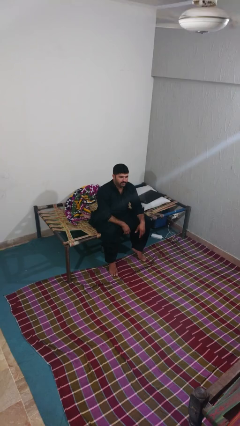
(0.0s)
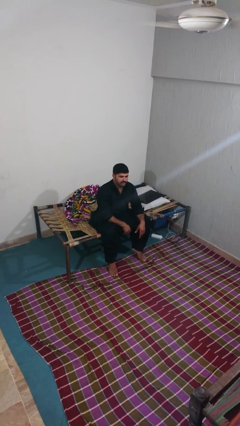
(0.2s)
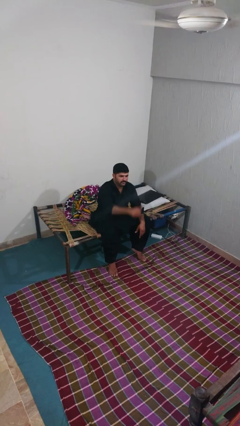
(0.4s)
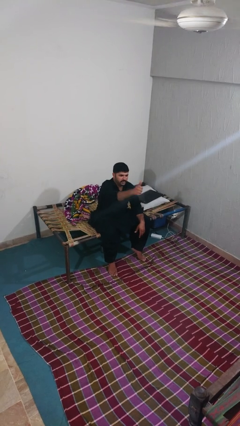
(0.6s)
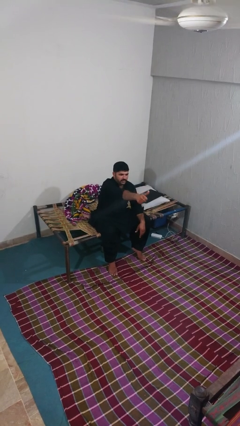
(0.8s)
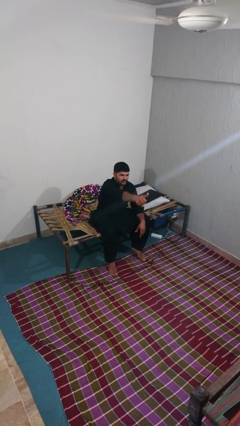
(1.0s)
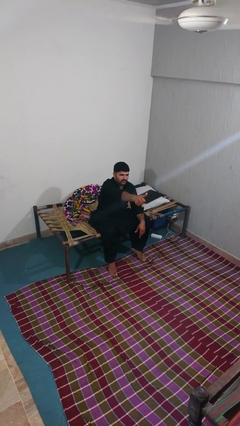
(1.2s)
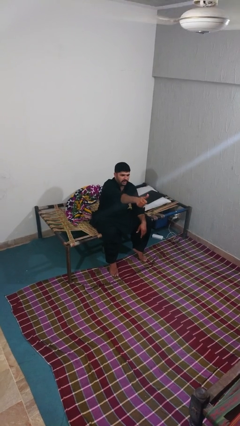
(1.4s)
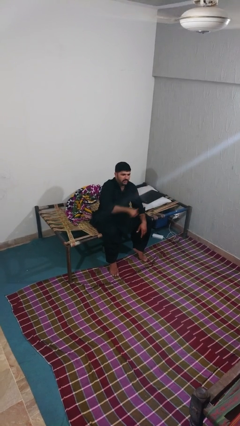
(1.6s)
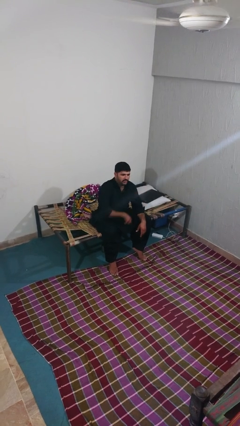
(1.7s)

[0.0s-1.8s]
person gestures thumbs up

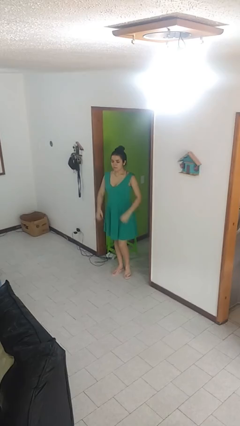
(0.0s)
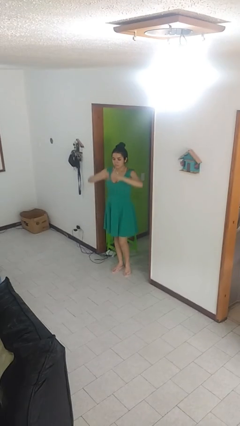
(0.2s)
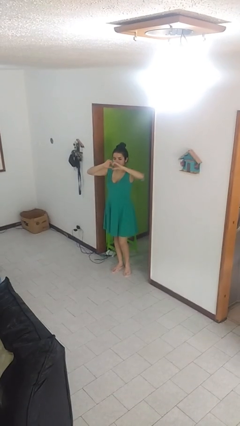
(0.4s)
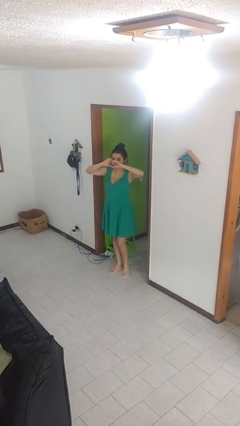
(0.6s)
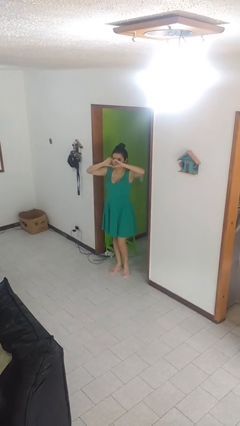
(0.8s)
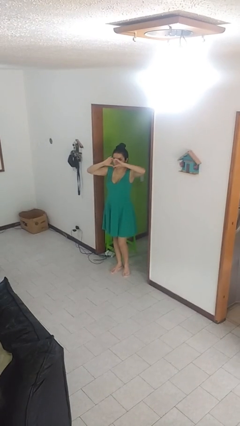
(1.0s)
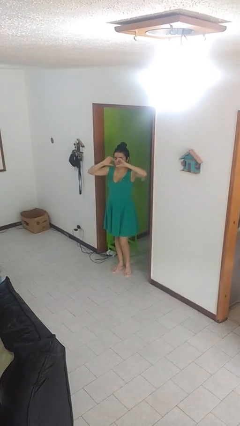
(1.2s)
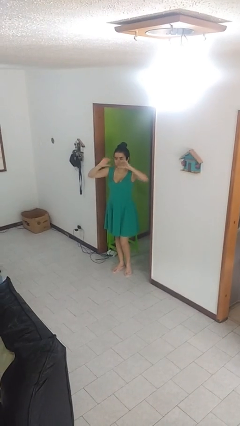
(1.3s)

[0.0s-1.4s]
person gestures heart

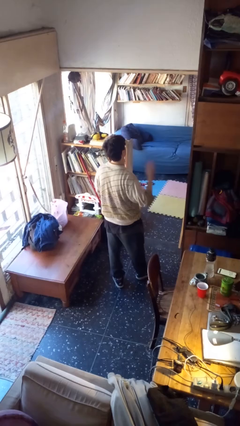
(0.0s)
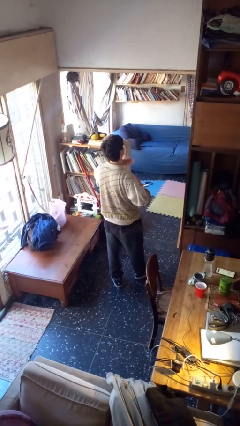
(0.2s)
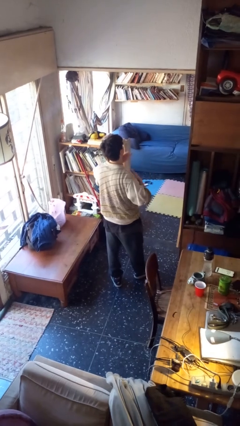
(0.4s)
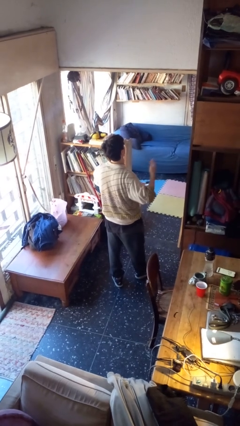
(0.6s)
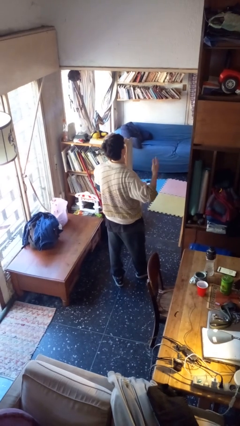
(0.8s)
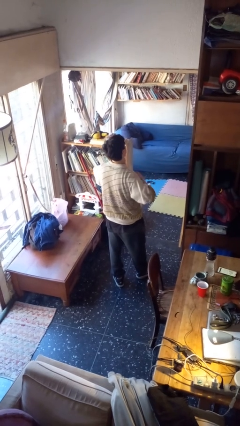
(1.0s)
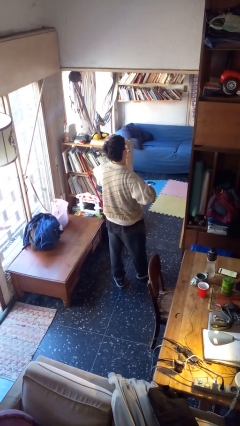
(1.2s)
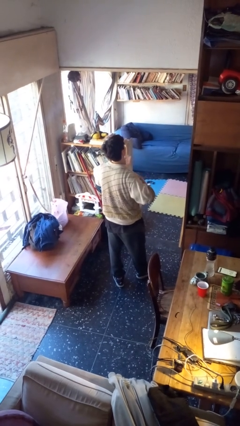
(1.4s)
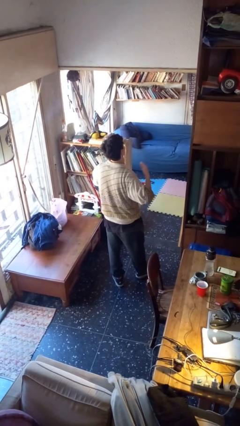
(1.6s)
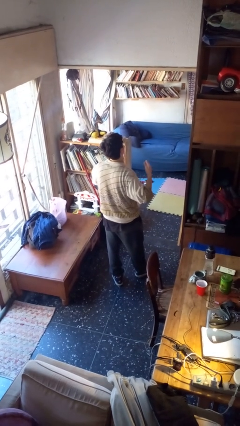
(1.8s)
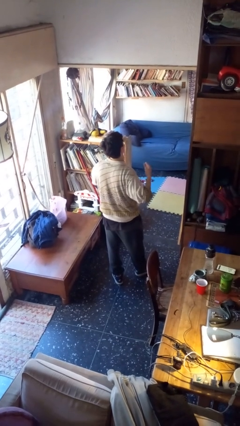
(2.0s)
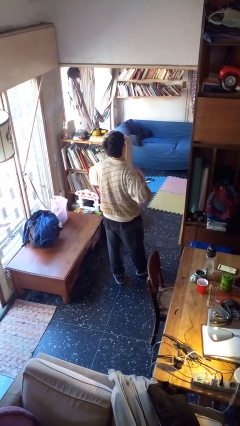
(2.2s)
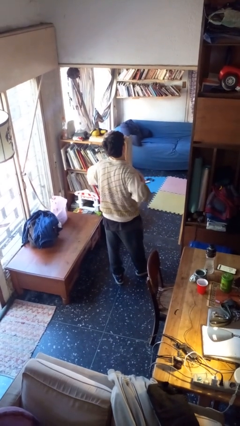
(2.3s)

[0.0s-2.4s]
person drums on chest

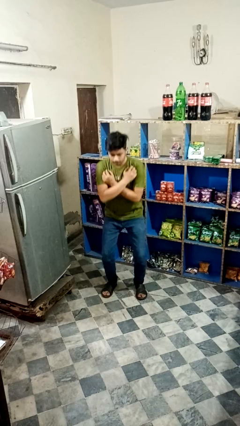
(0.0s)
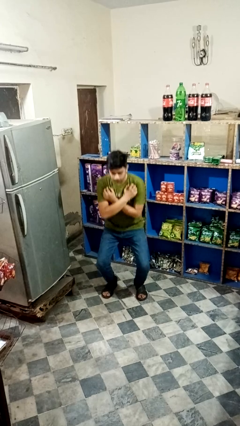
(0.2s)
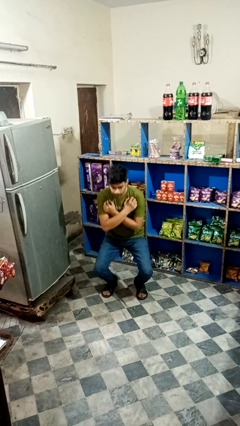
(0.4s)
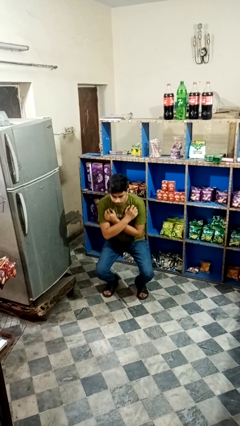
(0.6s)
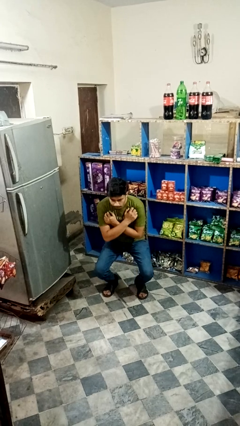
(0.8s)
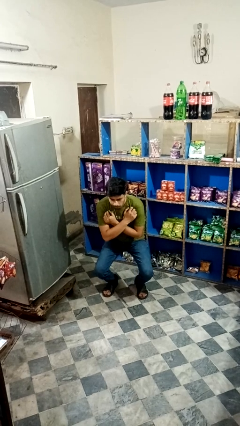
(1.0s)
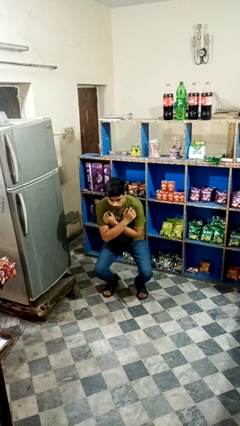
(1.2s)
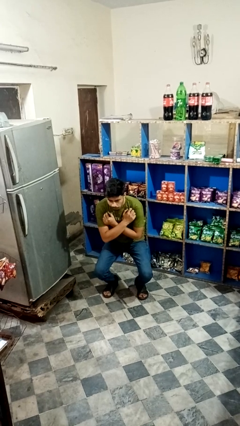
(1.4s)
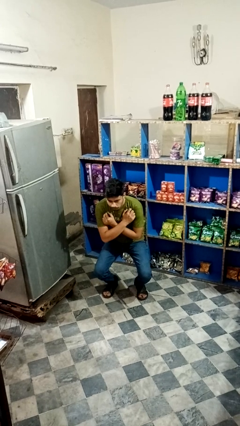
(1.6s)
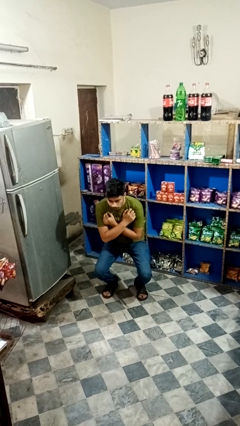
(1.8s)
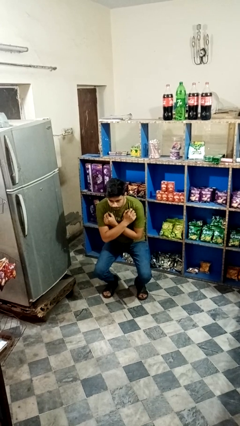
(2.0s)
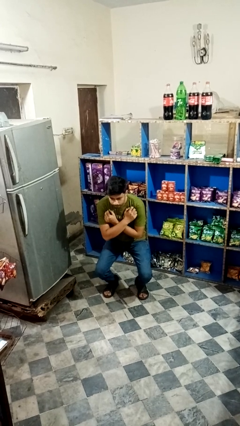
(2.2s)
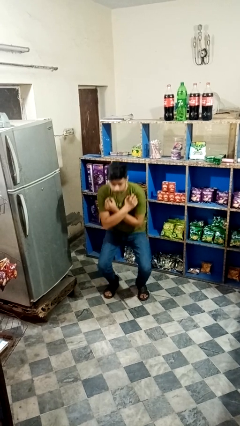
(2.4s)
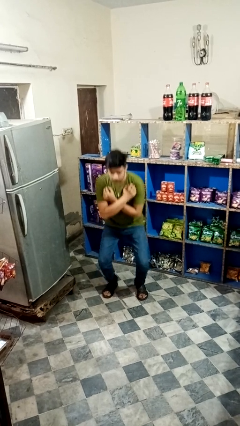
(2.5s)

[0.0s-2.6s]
person squats

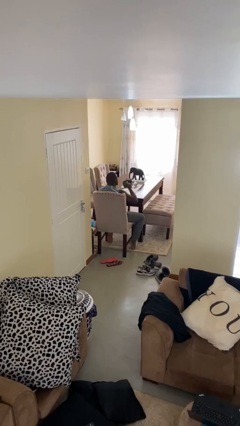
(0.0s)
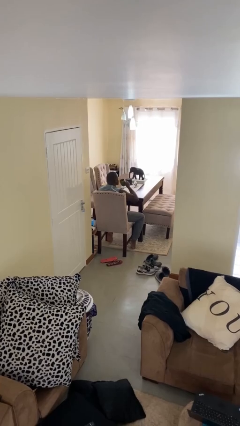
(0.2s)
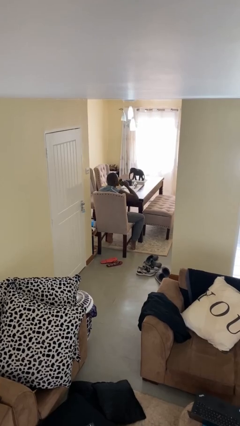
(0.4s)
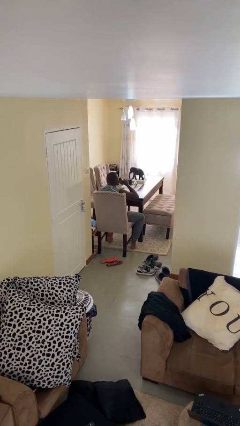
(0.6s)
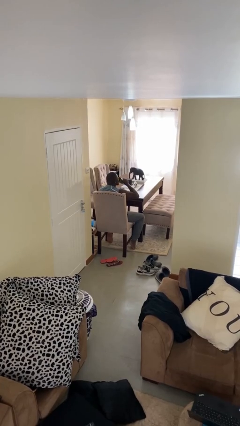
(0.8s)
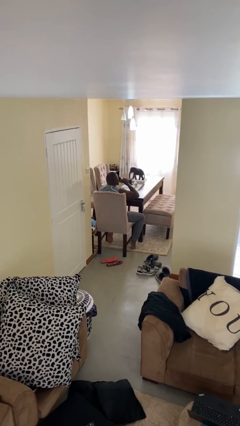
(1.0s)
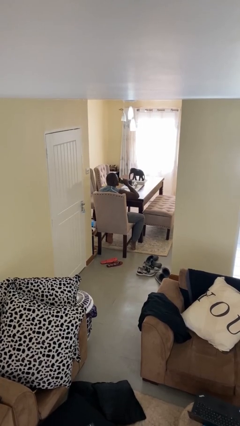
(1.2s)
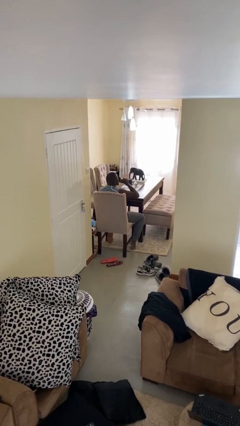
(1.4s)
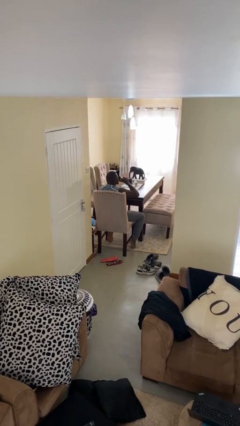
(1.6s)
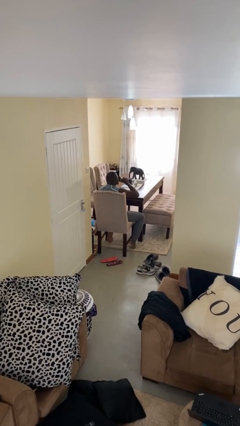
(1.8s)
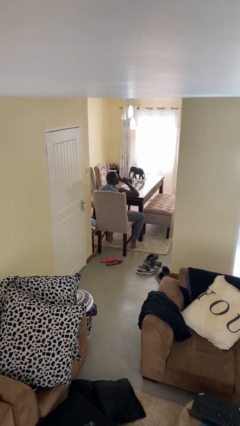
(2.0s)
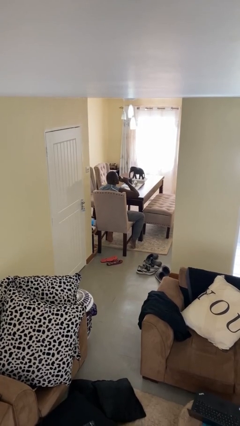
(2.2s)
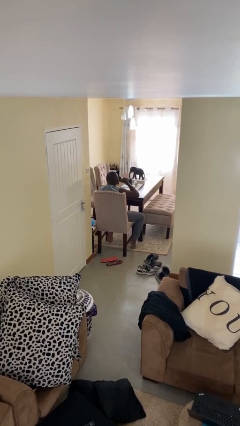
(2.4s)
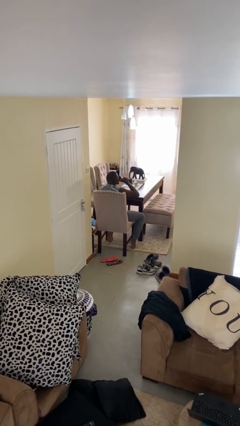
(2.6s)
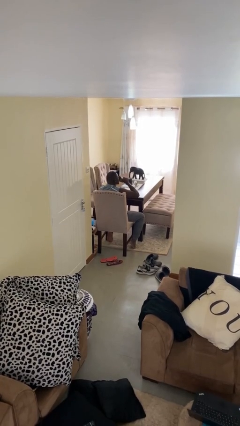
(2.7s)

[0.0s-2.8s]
person drinks from mug

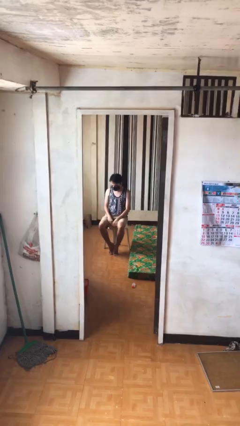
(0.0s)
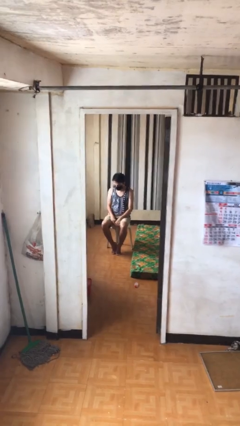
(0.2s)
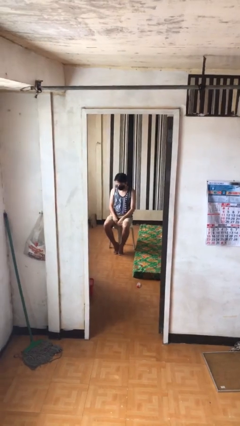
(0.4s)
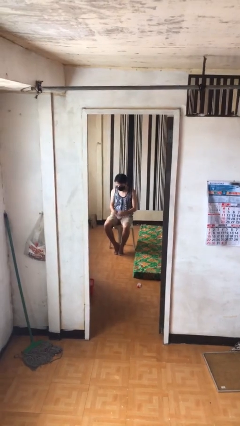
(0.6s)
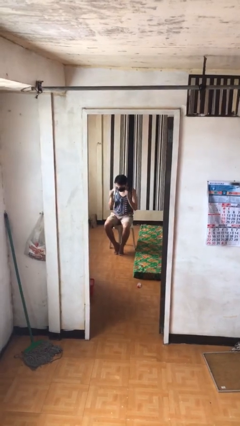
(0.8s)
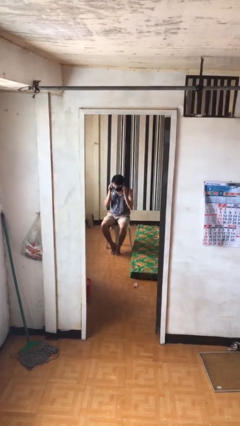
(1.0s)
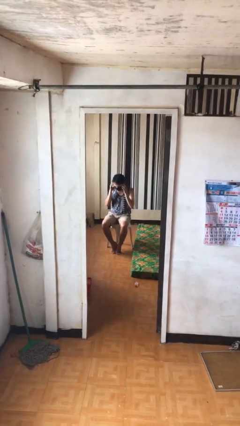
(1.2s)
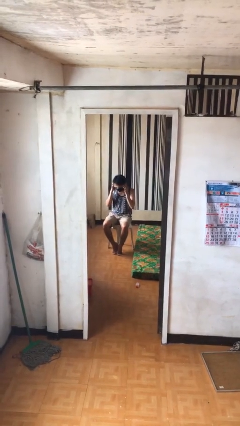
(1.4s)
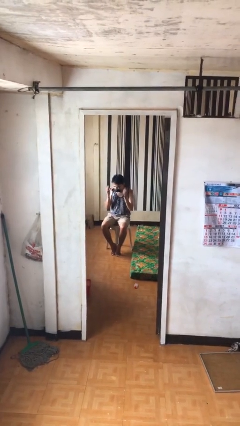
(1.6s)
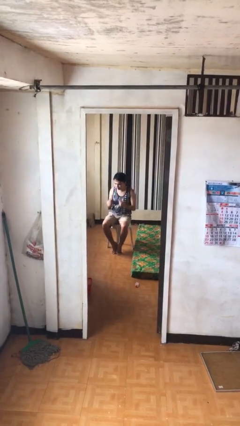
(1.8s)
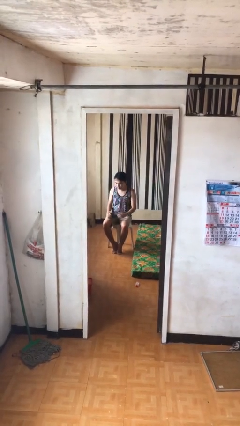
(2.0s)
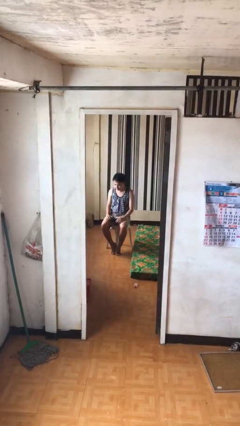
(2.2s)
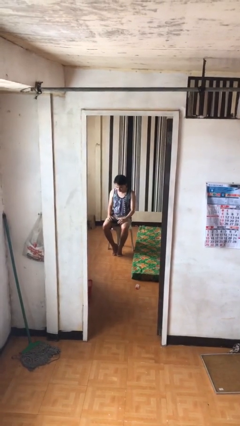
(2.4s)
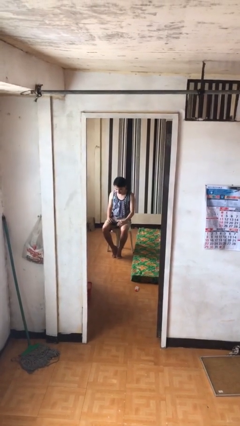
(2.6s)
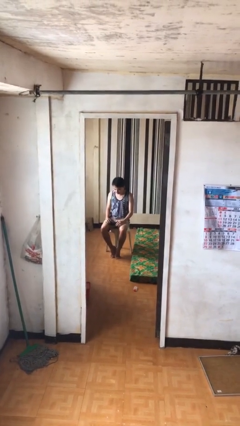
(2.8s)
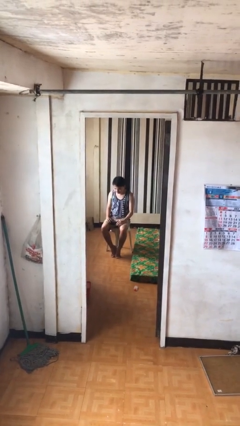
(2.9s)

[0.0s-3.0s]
person takes off facemask

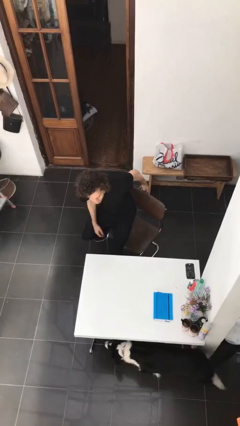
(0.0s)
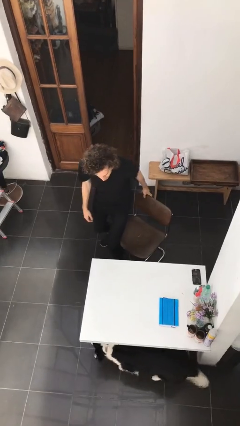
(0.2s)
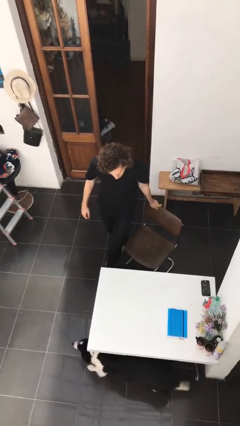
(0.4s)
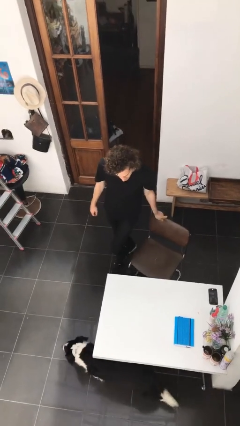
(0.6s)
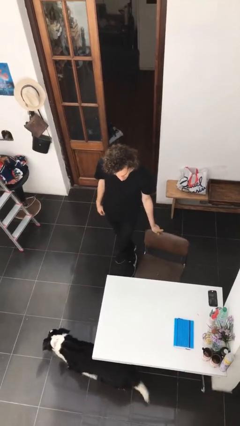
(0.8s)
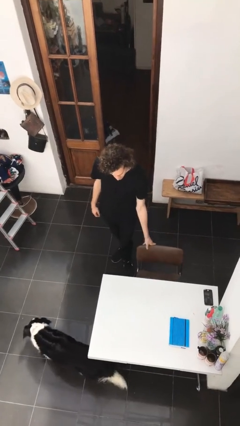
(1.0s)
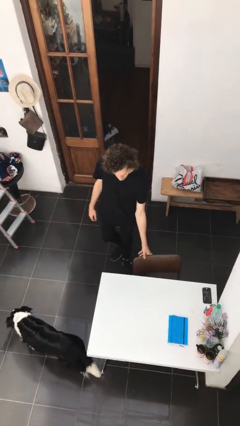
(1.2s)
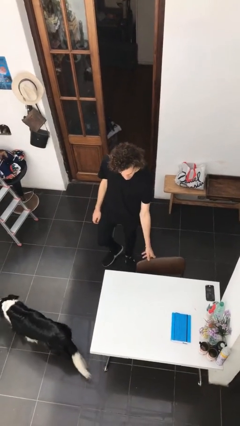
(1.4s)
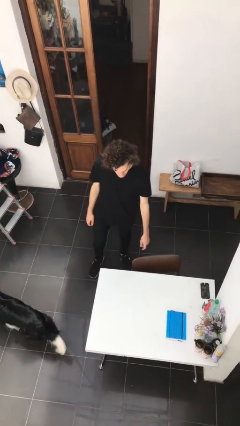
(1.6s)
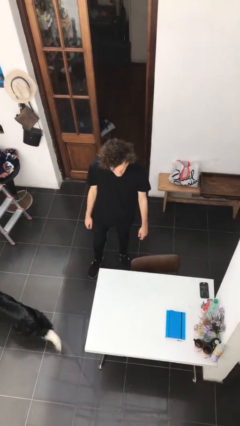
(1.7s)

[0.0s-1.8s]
person stands up

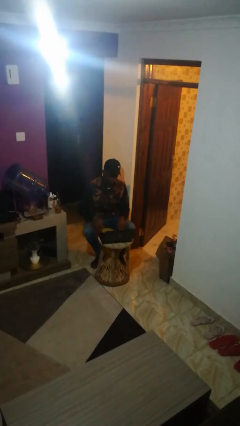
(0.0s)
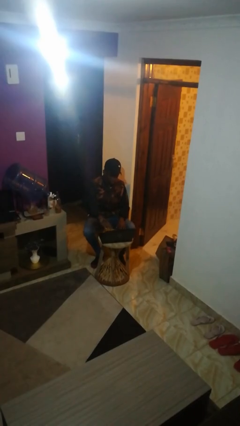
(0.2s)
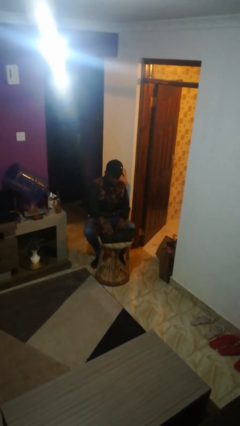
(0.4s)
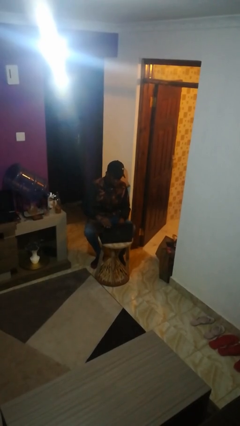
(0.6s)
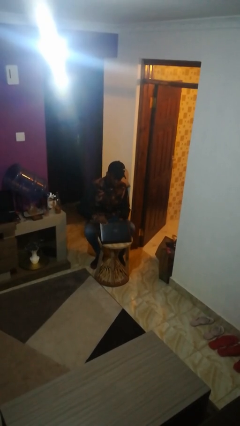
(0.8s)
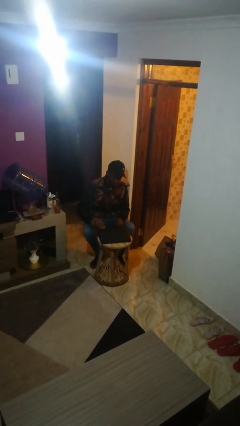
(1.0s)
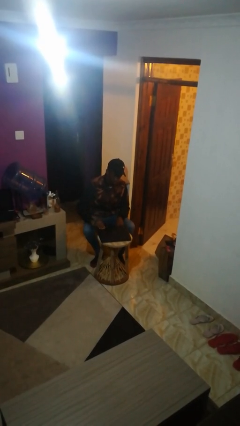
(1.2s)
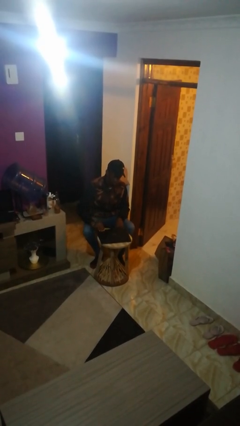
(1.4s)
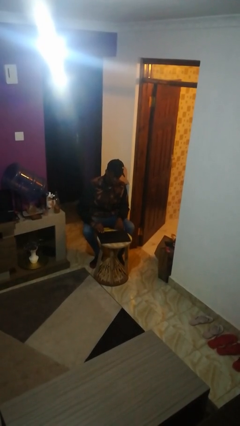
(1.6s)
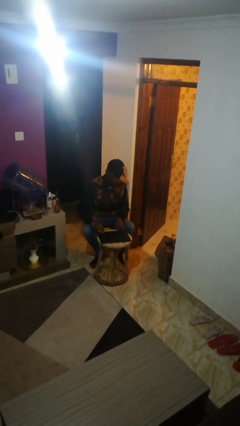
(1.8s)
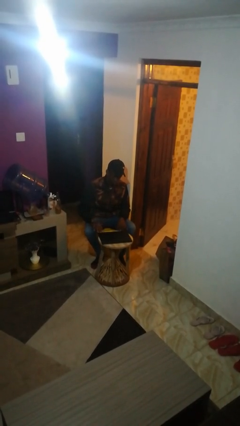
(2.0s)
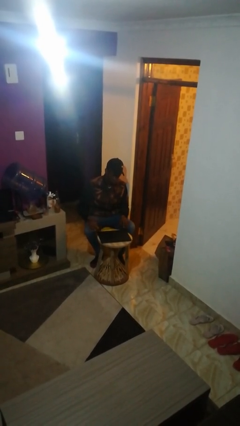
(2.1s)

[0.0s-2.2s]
person closes laptop
